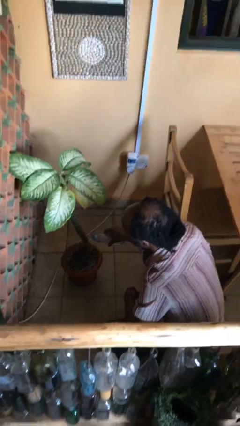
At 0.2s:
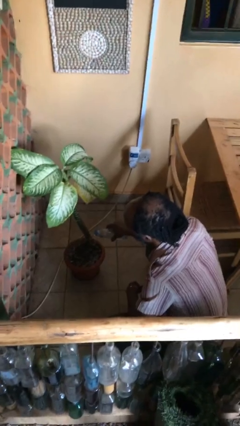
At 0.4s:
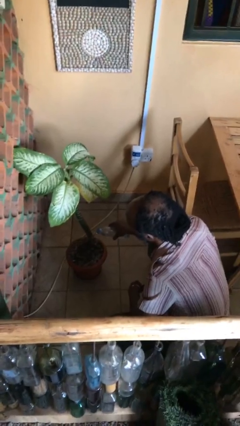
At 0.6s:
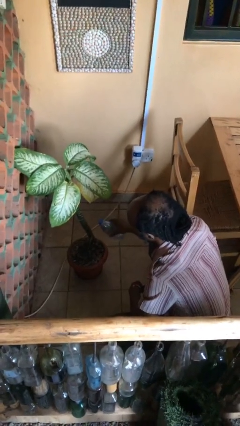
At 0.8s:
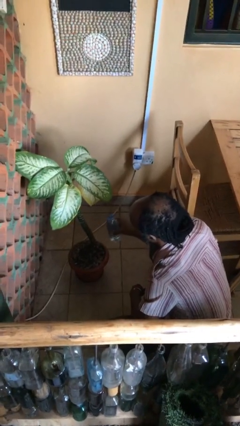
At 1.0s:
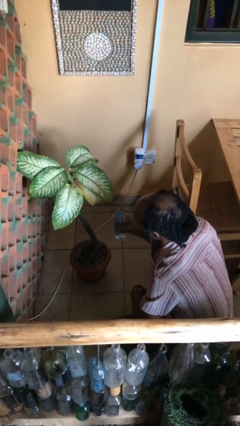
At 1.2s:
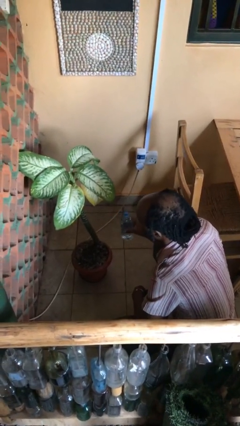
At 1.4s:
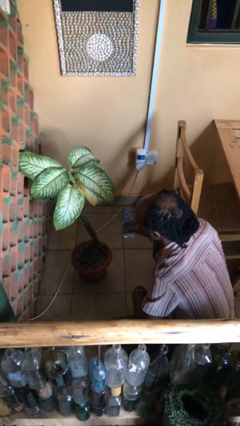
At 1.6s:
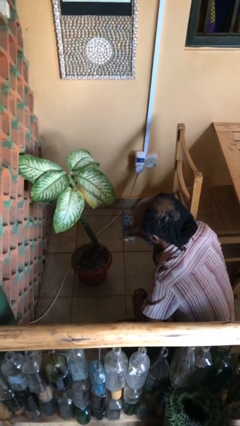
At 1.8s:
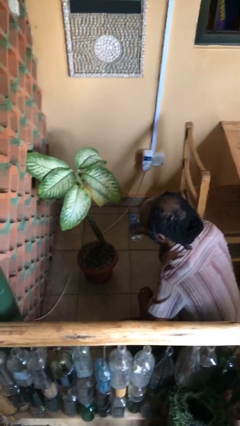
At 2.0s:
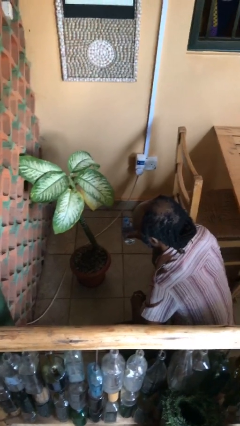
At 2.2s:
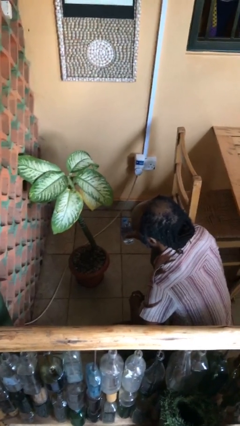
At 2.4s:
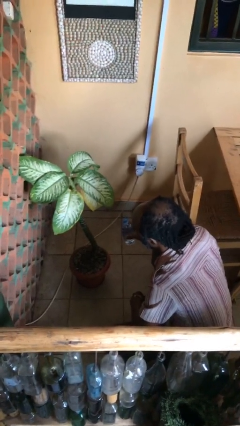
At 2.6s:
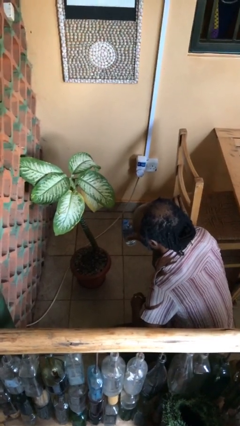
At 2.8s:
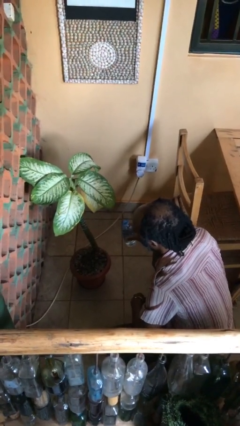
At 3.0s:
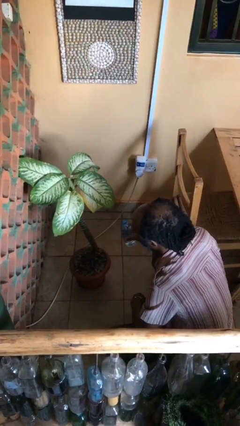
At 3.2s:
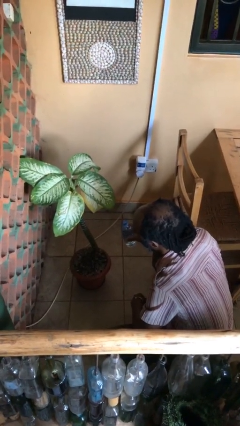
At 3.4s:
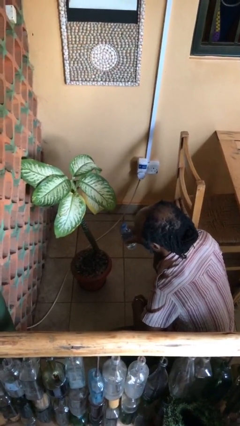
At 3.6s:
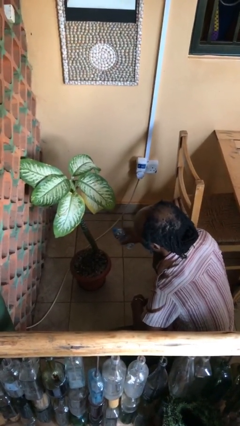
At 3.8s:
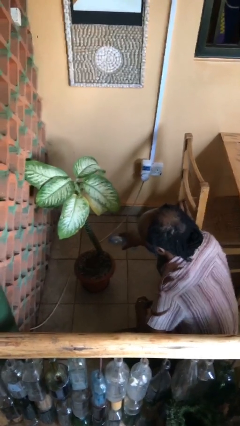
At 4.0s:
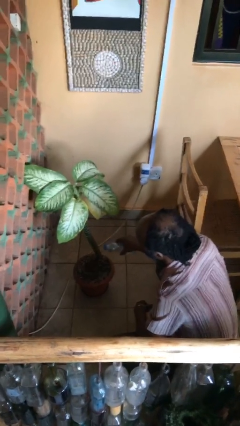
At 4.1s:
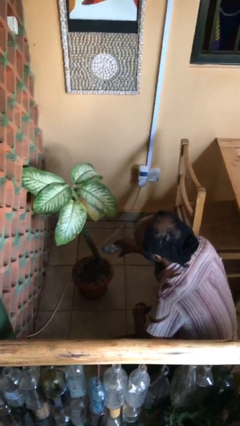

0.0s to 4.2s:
person waters houseplant

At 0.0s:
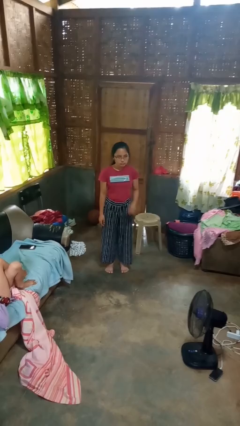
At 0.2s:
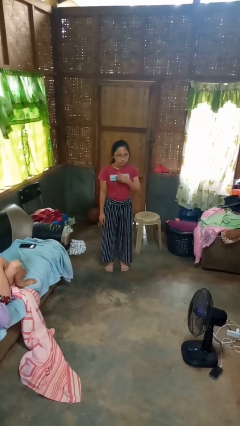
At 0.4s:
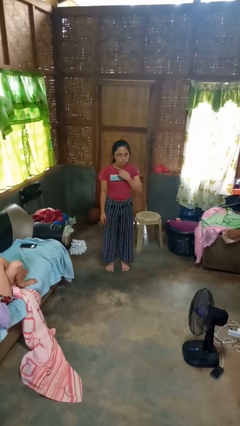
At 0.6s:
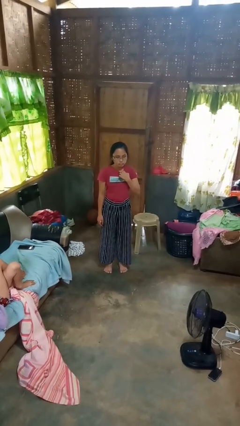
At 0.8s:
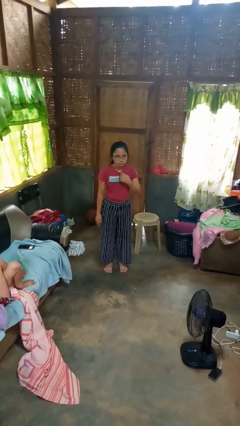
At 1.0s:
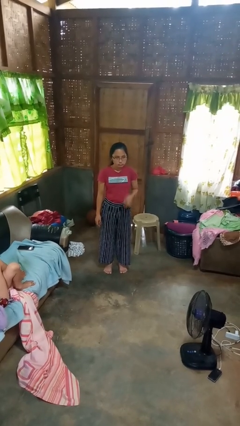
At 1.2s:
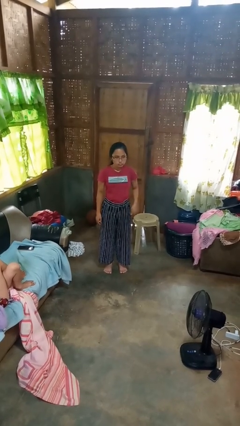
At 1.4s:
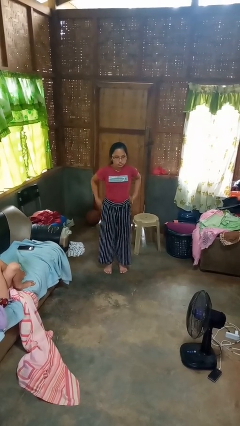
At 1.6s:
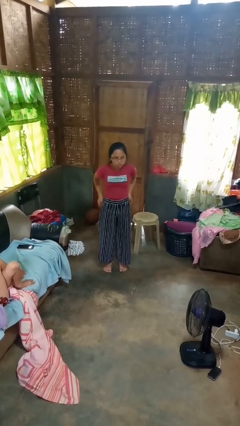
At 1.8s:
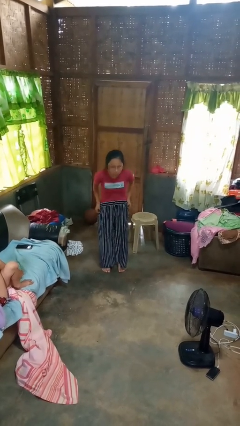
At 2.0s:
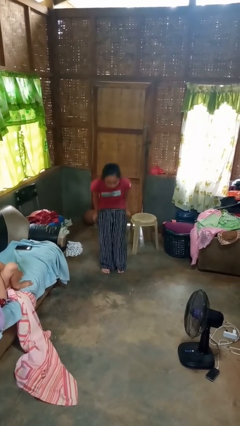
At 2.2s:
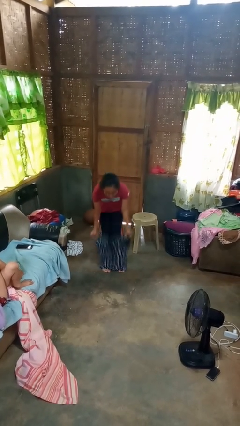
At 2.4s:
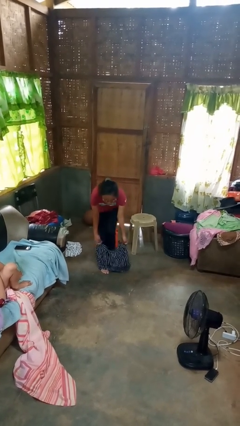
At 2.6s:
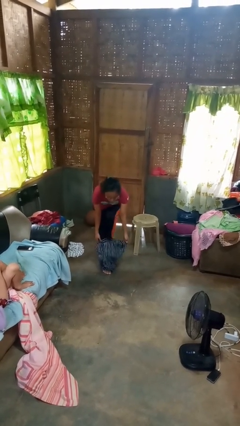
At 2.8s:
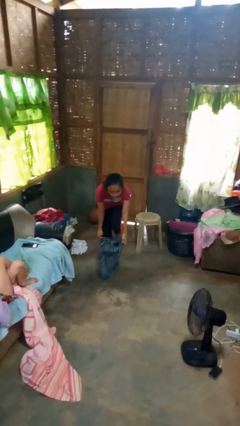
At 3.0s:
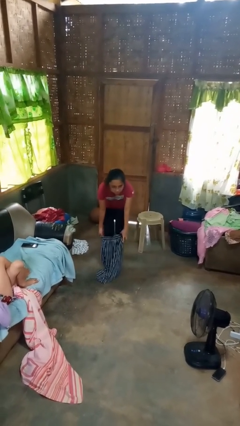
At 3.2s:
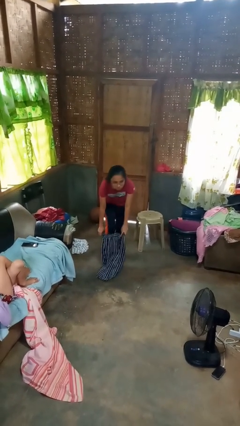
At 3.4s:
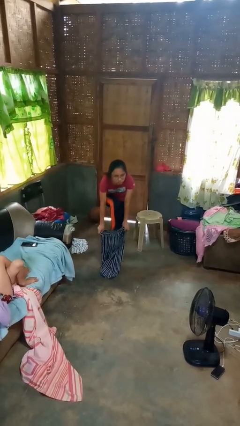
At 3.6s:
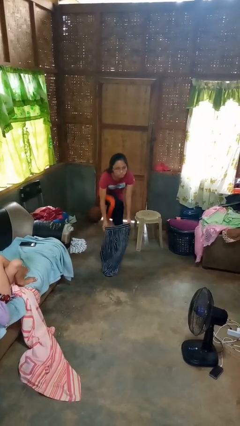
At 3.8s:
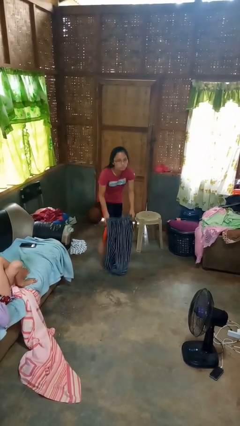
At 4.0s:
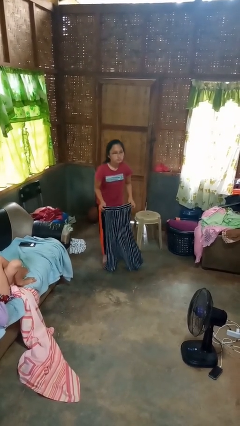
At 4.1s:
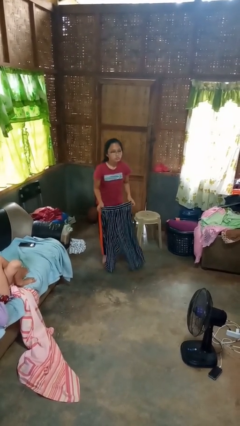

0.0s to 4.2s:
person takes off pants

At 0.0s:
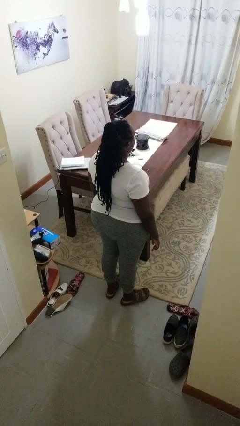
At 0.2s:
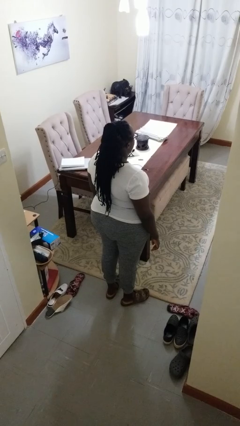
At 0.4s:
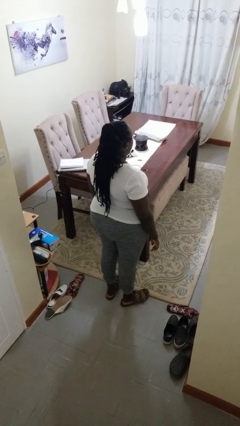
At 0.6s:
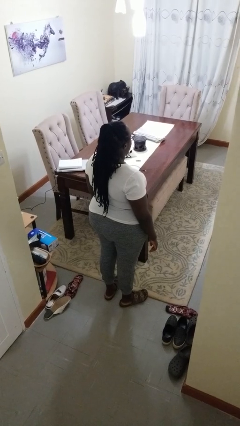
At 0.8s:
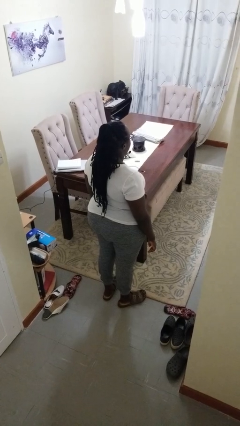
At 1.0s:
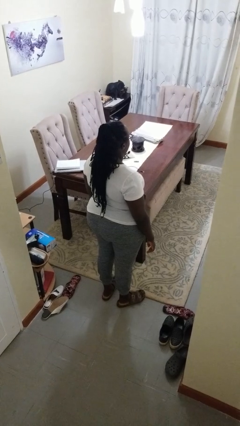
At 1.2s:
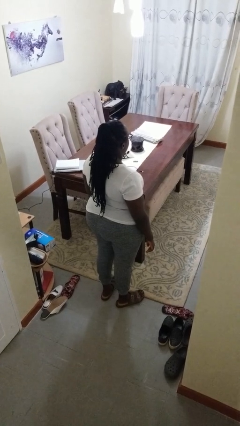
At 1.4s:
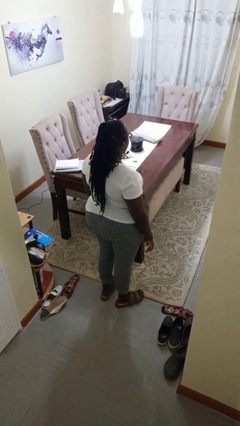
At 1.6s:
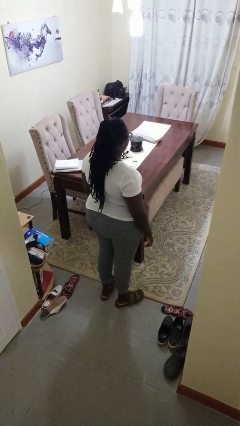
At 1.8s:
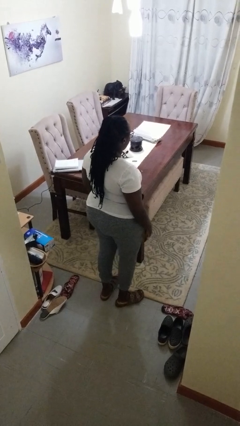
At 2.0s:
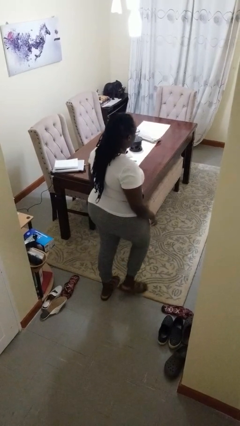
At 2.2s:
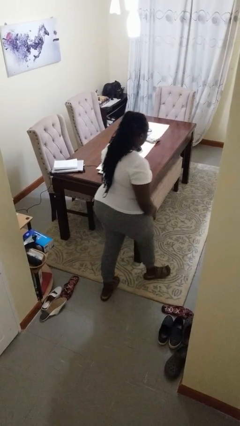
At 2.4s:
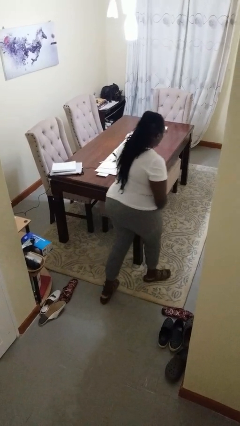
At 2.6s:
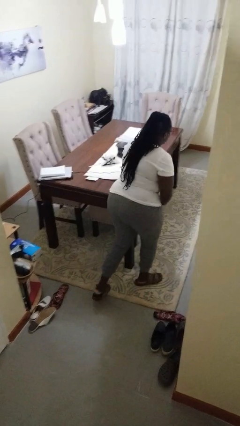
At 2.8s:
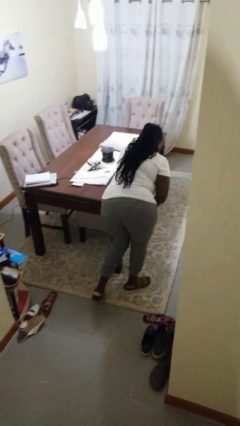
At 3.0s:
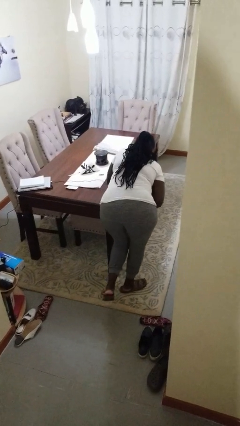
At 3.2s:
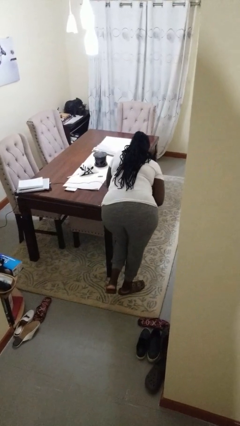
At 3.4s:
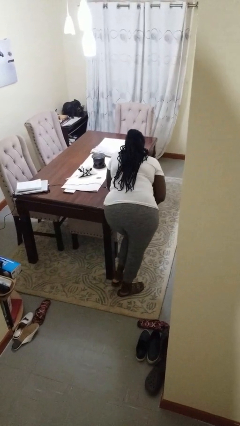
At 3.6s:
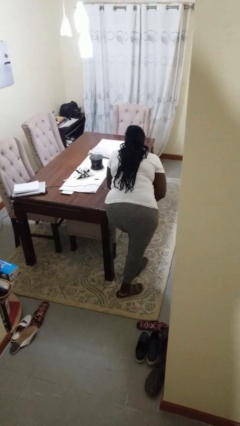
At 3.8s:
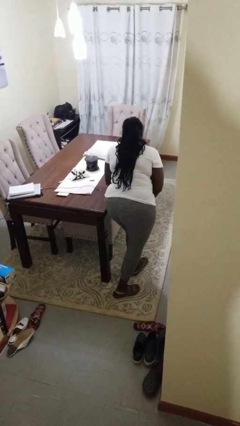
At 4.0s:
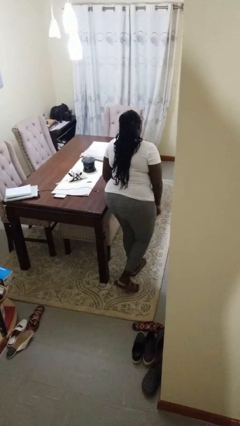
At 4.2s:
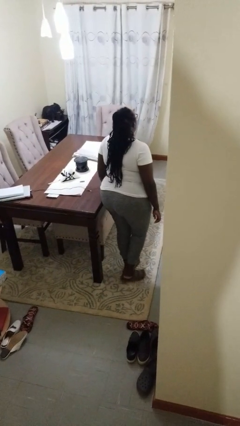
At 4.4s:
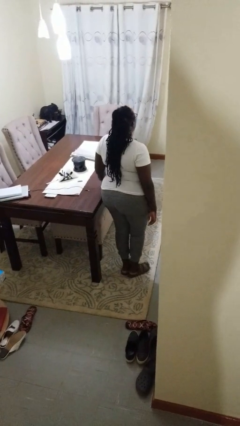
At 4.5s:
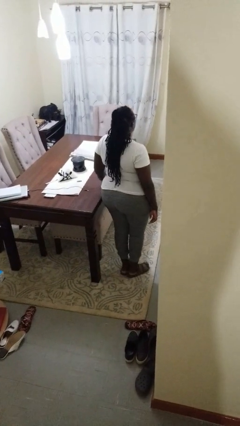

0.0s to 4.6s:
person bumps into table

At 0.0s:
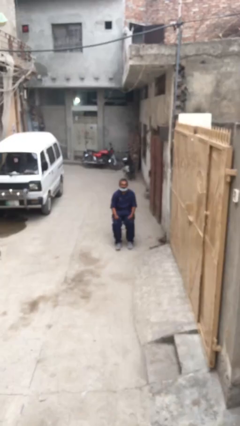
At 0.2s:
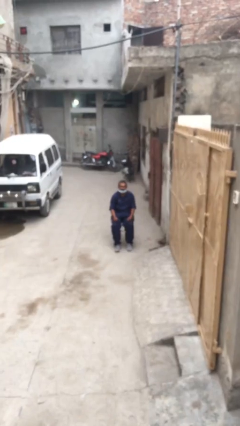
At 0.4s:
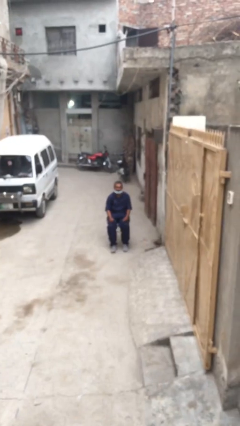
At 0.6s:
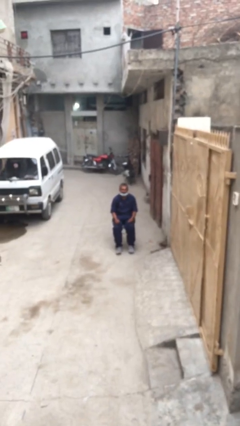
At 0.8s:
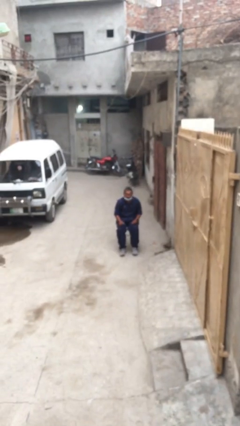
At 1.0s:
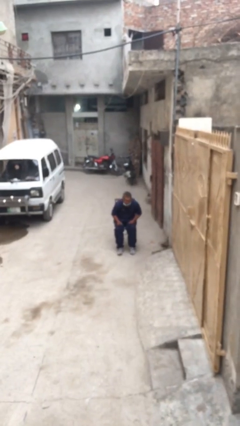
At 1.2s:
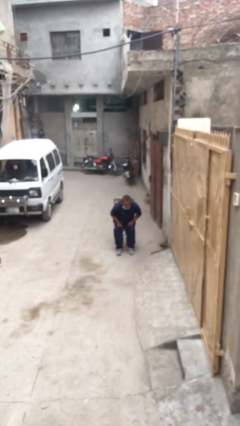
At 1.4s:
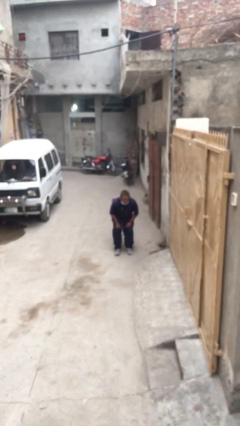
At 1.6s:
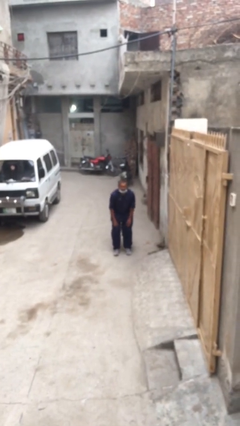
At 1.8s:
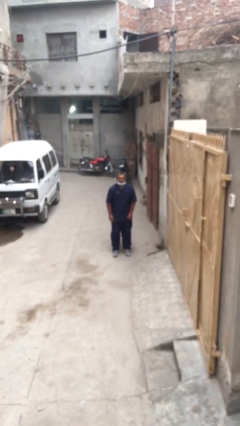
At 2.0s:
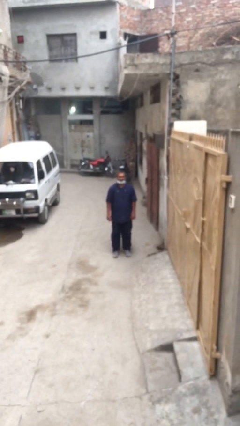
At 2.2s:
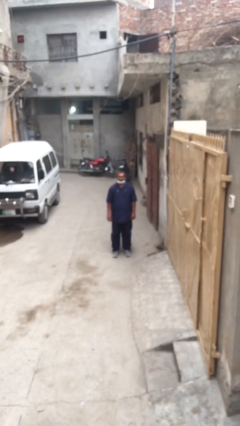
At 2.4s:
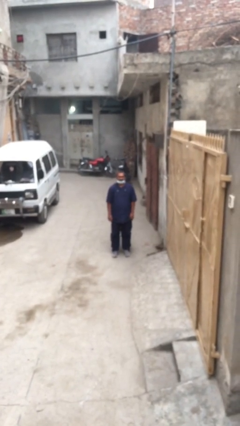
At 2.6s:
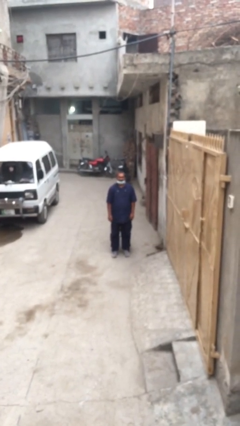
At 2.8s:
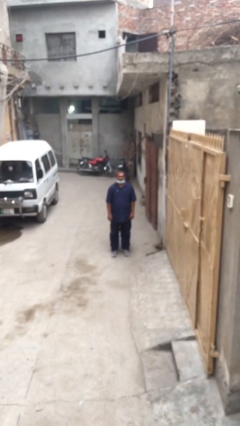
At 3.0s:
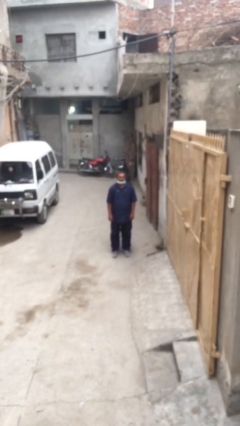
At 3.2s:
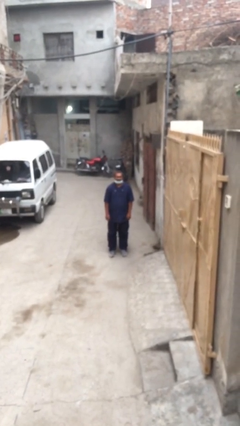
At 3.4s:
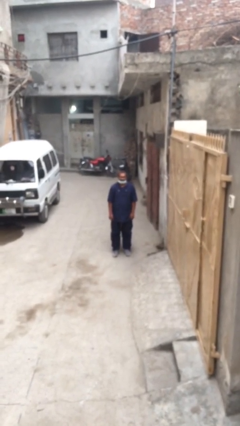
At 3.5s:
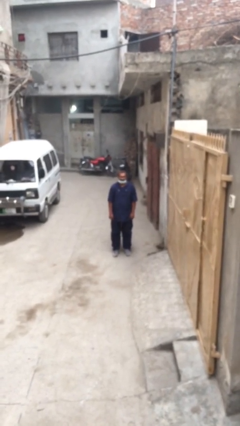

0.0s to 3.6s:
person stands up

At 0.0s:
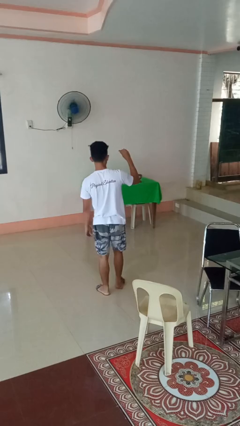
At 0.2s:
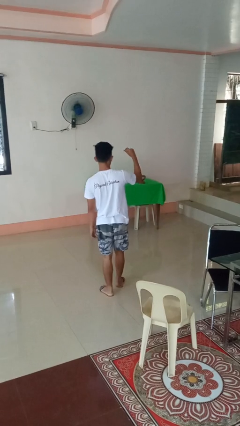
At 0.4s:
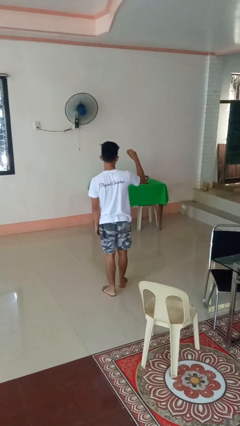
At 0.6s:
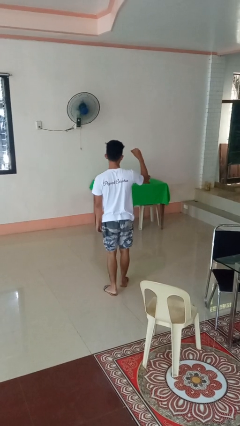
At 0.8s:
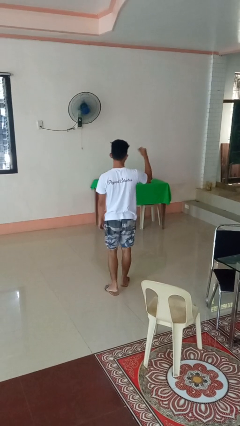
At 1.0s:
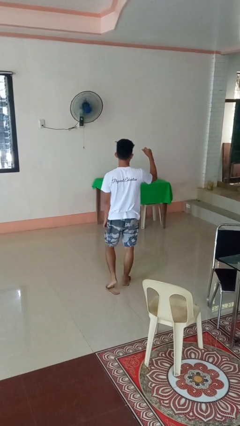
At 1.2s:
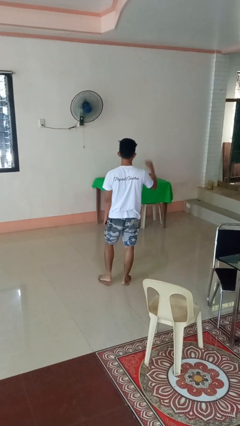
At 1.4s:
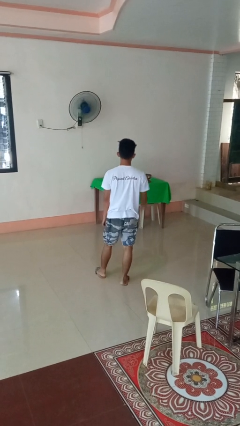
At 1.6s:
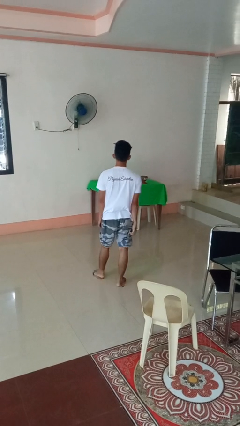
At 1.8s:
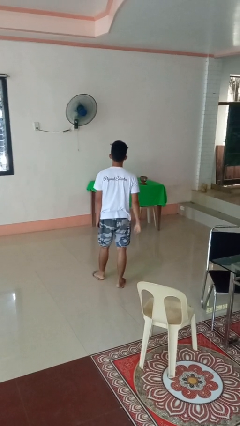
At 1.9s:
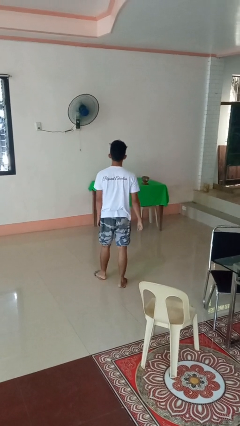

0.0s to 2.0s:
person snaps fingers
